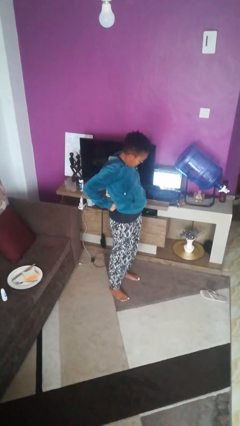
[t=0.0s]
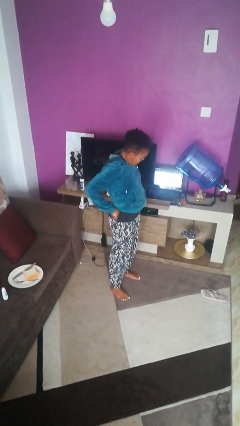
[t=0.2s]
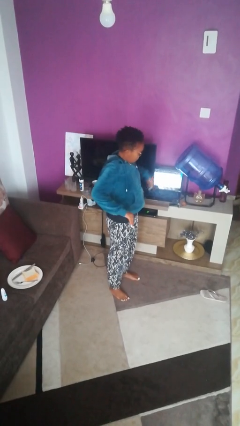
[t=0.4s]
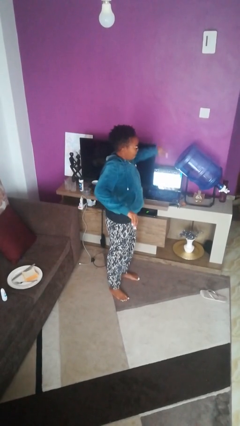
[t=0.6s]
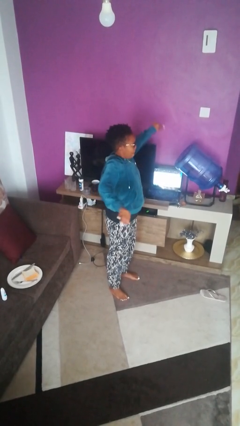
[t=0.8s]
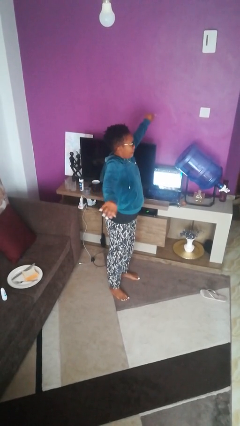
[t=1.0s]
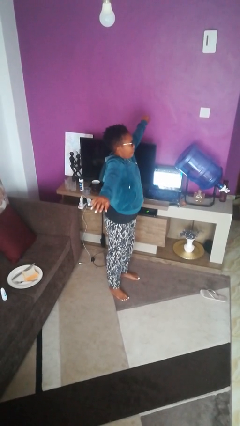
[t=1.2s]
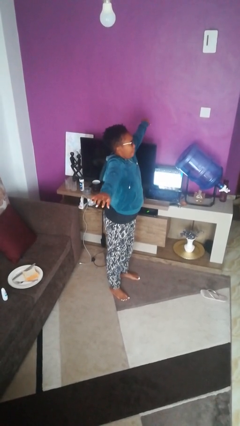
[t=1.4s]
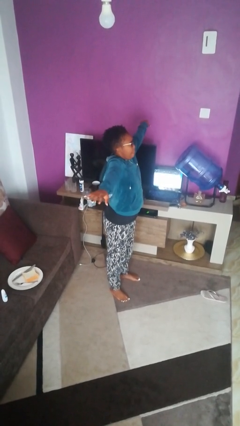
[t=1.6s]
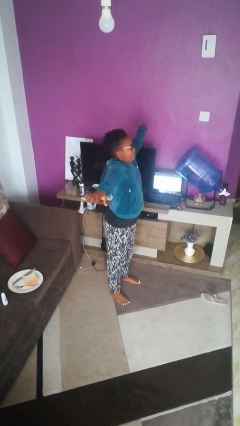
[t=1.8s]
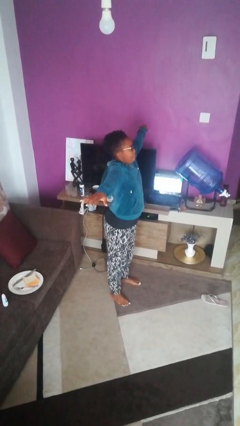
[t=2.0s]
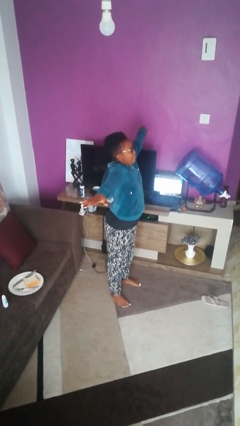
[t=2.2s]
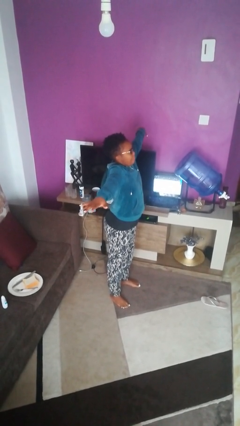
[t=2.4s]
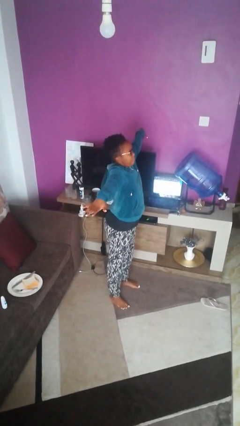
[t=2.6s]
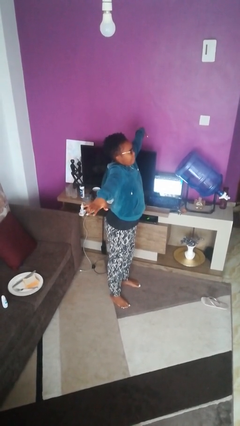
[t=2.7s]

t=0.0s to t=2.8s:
person stretches arms to side

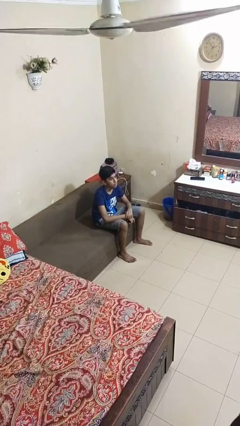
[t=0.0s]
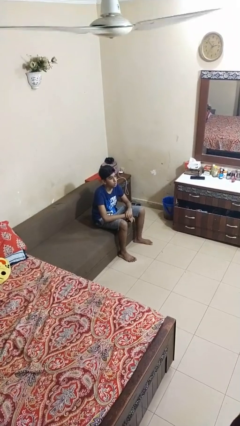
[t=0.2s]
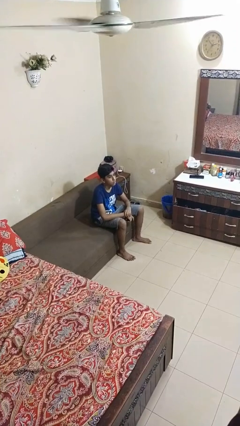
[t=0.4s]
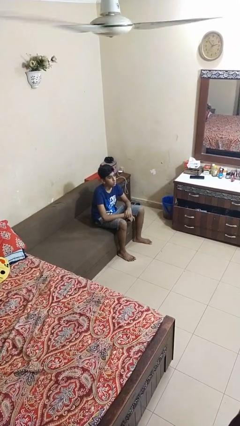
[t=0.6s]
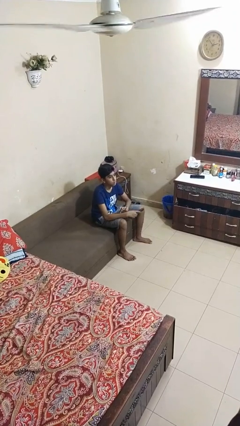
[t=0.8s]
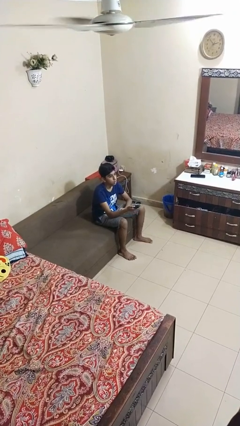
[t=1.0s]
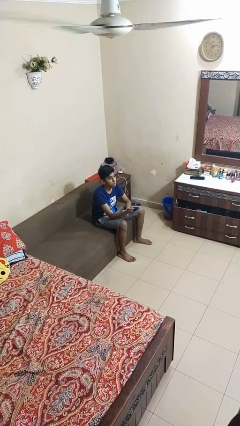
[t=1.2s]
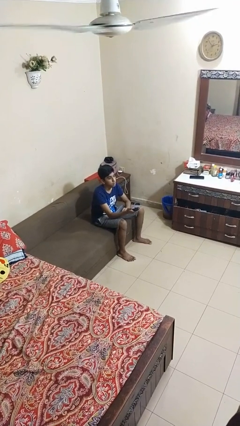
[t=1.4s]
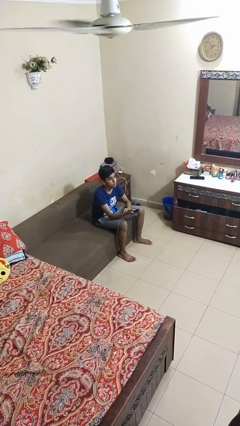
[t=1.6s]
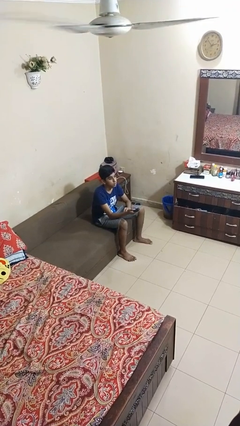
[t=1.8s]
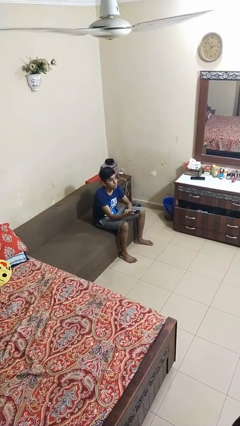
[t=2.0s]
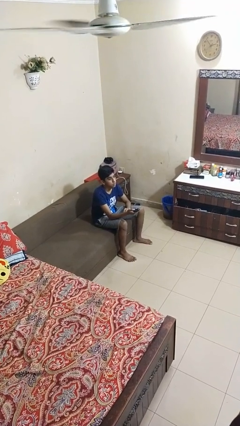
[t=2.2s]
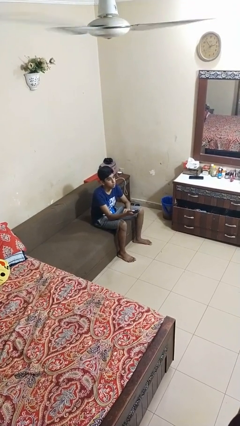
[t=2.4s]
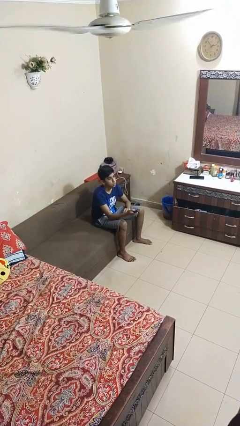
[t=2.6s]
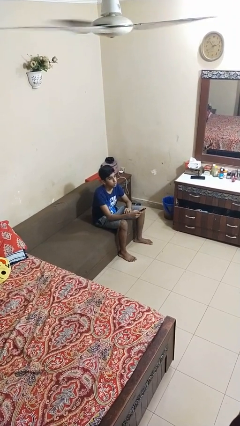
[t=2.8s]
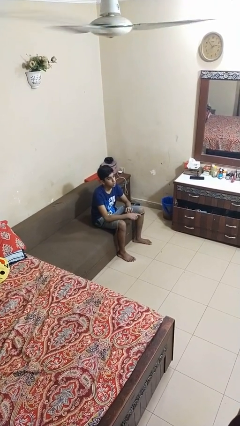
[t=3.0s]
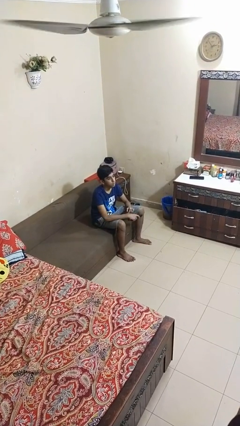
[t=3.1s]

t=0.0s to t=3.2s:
person uses television remote

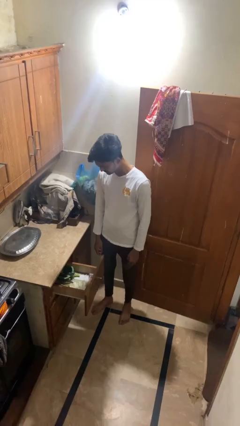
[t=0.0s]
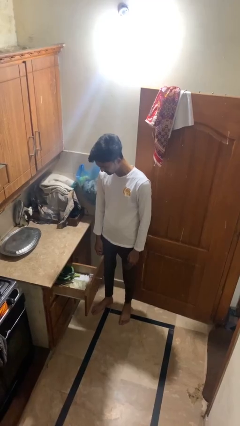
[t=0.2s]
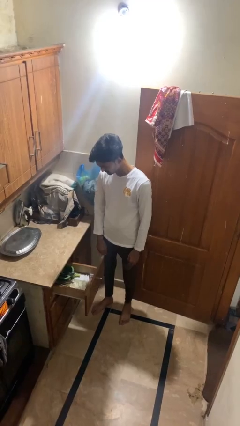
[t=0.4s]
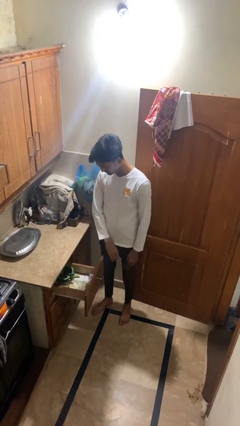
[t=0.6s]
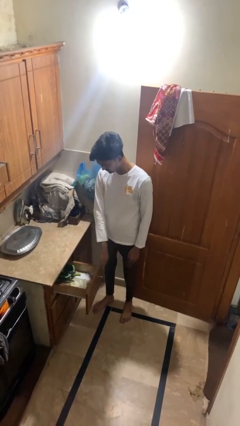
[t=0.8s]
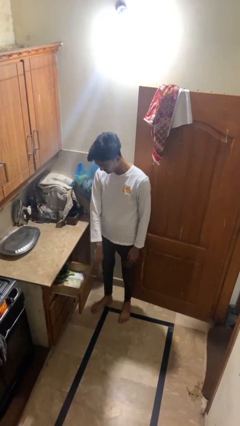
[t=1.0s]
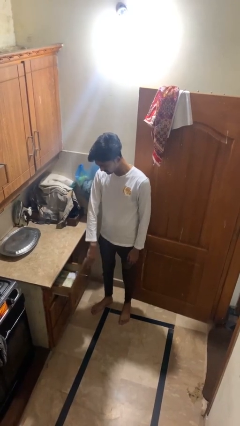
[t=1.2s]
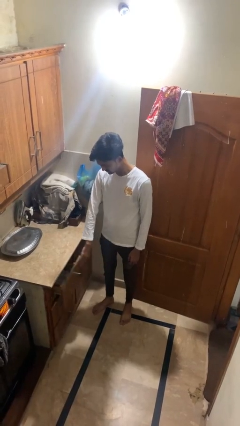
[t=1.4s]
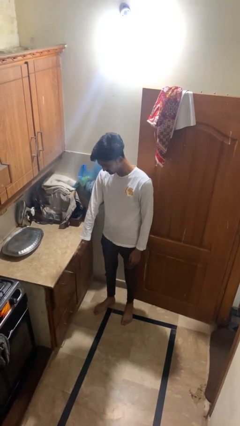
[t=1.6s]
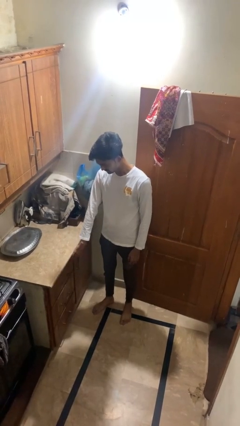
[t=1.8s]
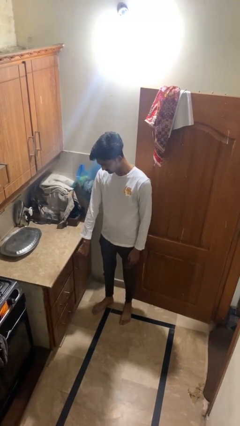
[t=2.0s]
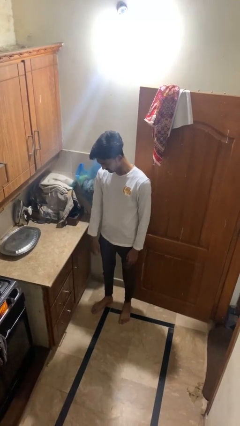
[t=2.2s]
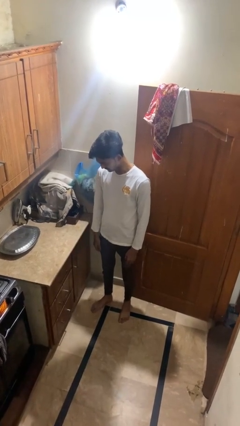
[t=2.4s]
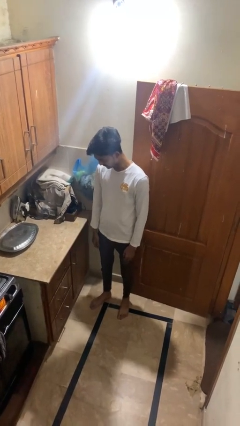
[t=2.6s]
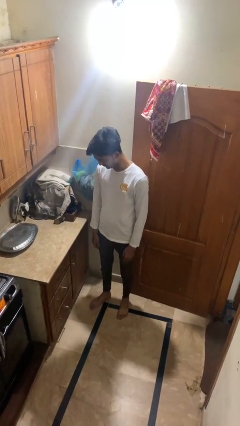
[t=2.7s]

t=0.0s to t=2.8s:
person closes kitchen drawer

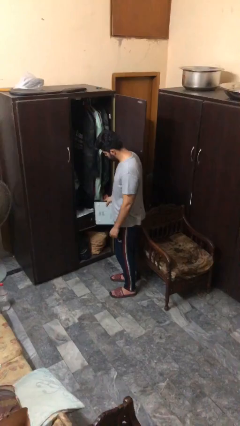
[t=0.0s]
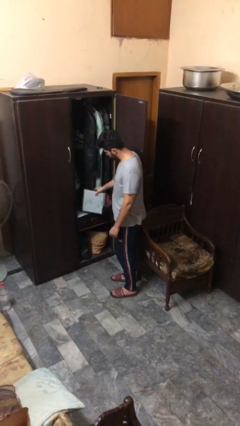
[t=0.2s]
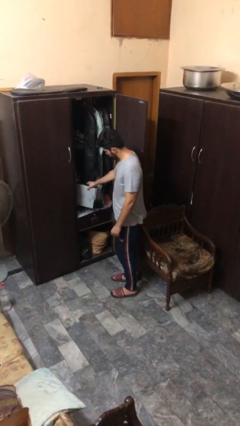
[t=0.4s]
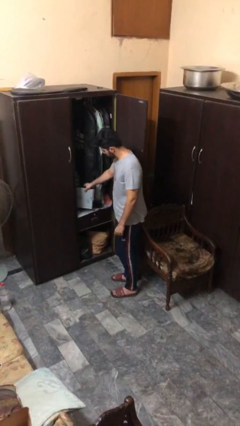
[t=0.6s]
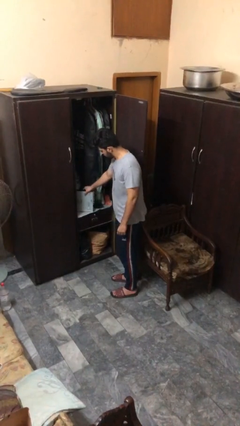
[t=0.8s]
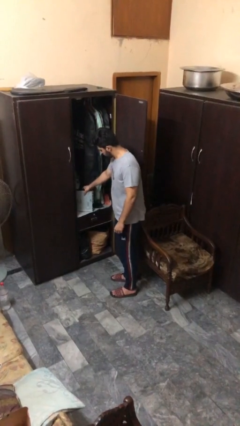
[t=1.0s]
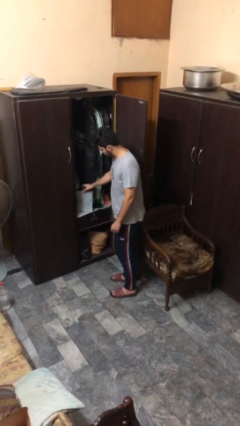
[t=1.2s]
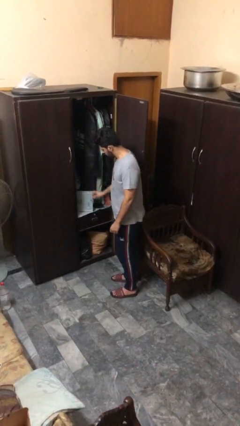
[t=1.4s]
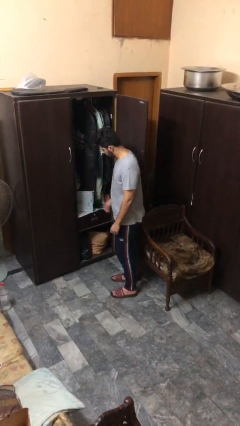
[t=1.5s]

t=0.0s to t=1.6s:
person puts down object into cabinet

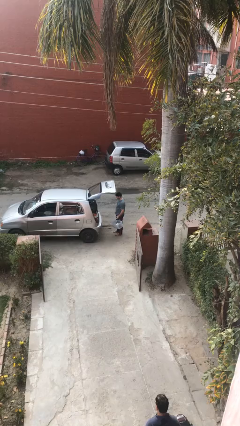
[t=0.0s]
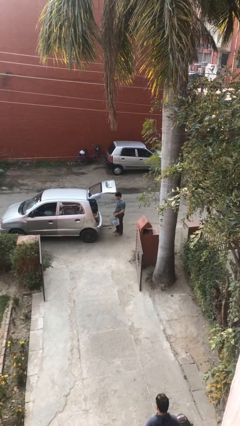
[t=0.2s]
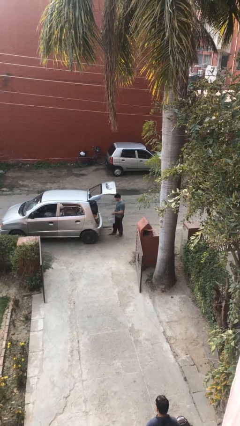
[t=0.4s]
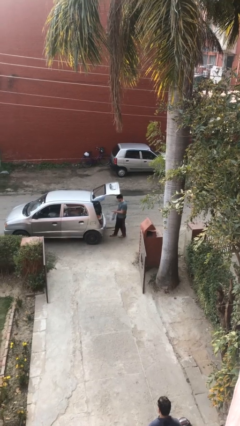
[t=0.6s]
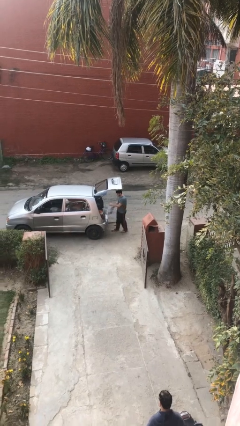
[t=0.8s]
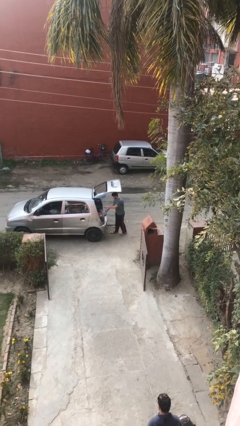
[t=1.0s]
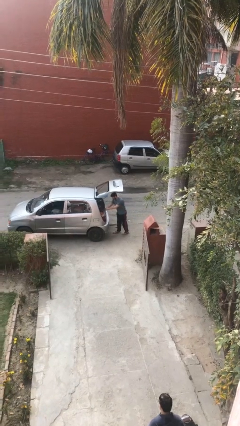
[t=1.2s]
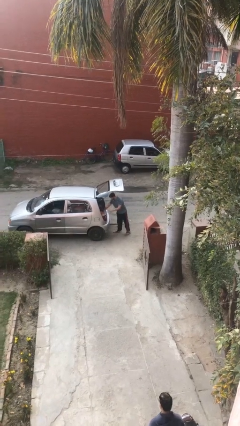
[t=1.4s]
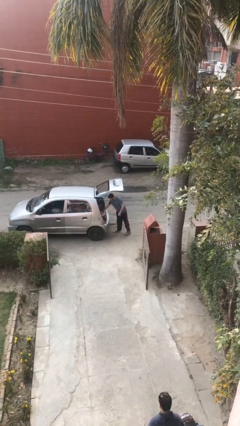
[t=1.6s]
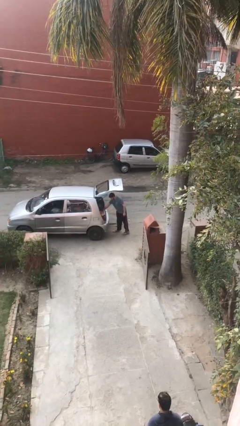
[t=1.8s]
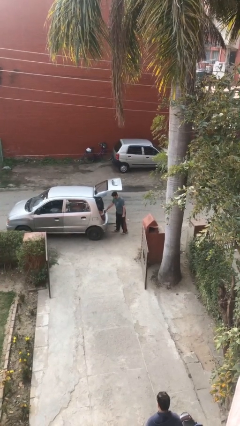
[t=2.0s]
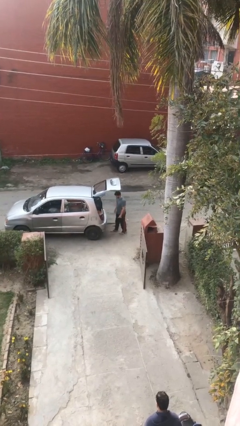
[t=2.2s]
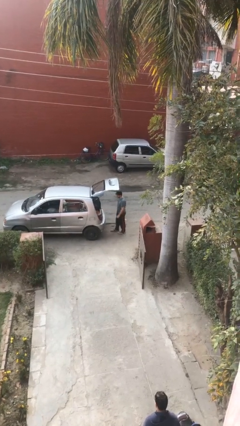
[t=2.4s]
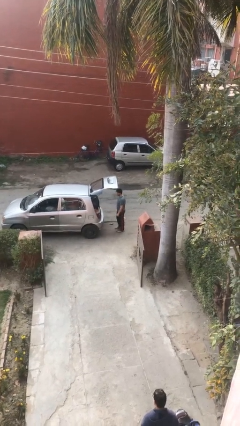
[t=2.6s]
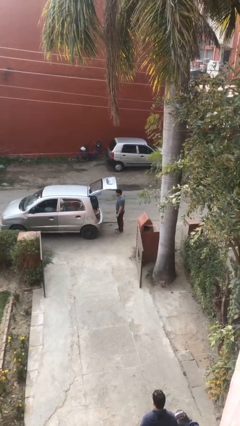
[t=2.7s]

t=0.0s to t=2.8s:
person loads car

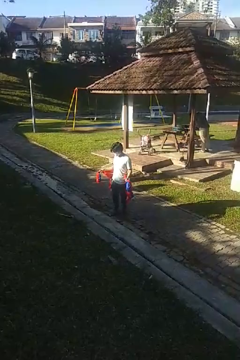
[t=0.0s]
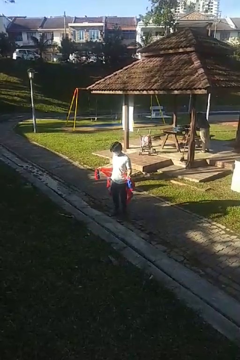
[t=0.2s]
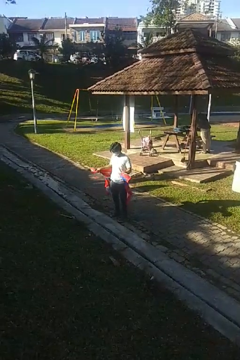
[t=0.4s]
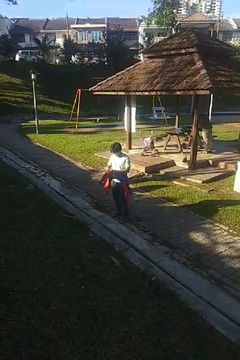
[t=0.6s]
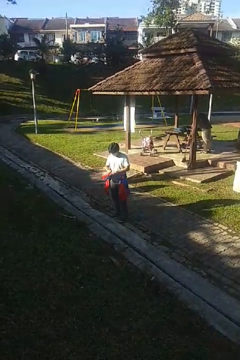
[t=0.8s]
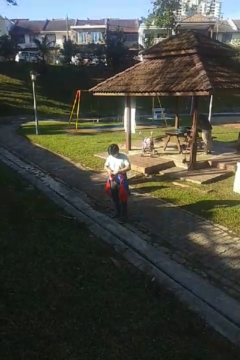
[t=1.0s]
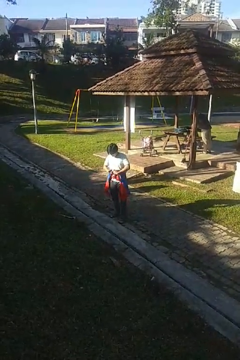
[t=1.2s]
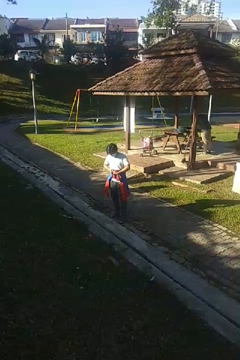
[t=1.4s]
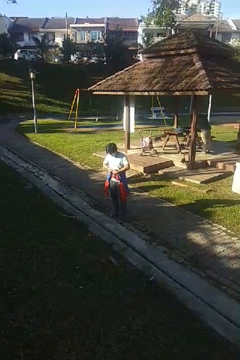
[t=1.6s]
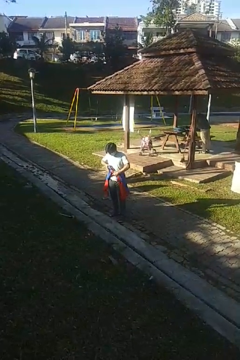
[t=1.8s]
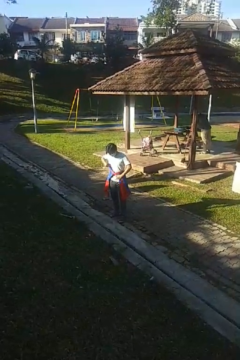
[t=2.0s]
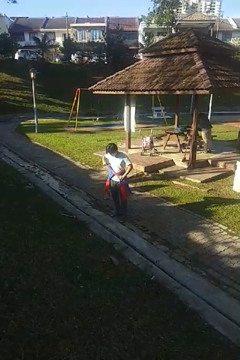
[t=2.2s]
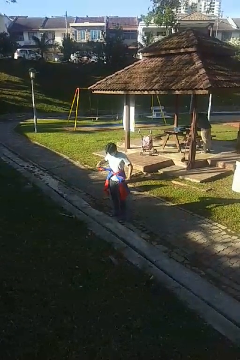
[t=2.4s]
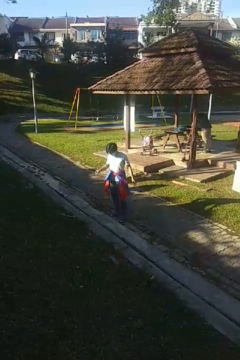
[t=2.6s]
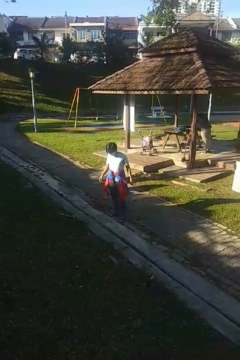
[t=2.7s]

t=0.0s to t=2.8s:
person ties jacket around waist

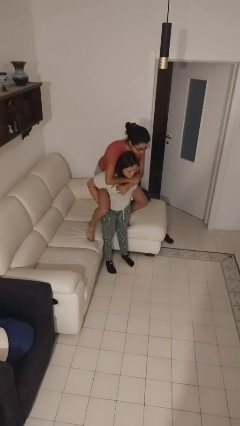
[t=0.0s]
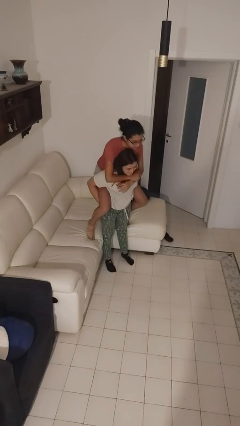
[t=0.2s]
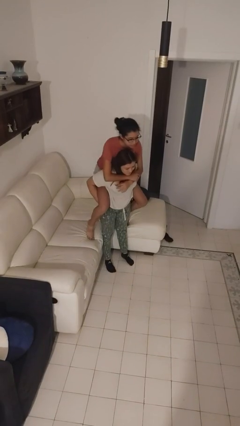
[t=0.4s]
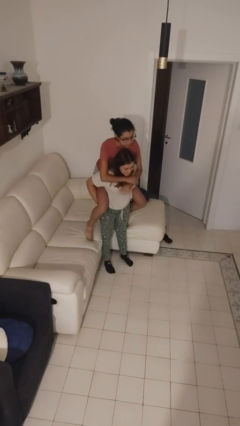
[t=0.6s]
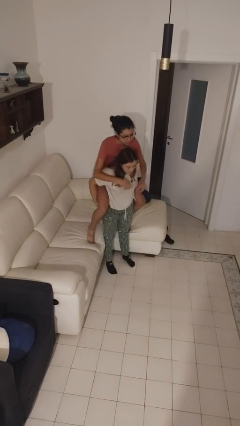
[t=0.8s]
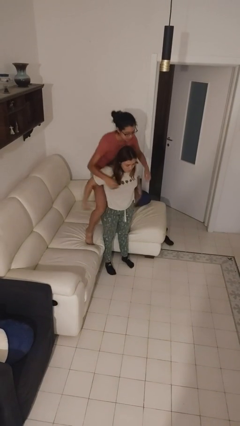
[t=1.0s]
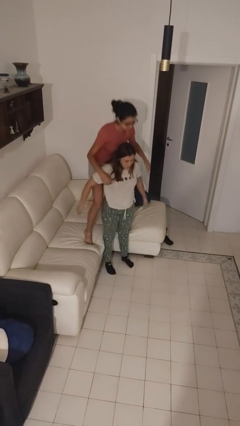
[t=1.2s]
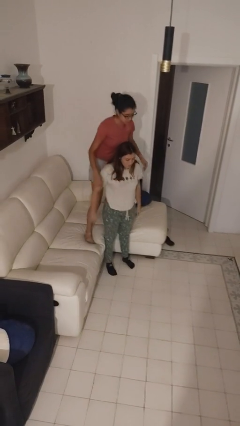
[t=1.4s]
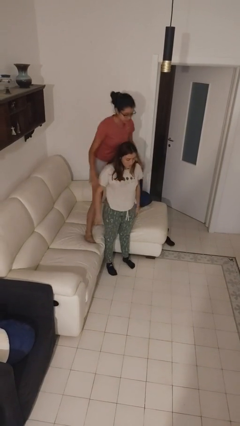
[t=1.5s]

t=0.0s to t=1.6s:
person puts down person
